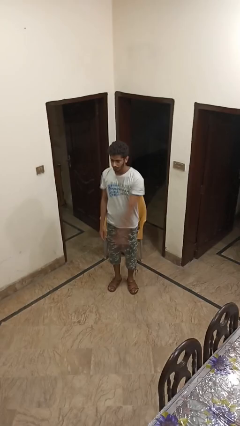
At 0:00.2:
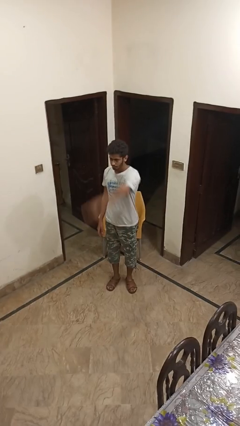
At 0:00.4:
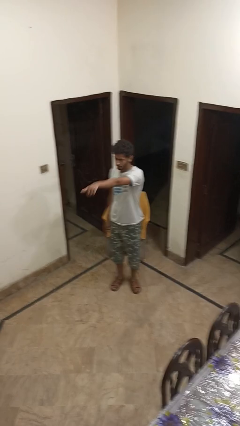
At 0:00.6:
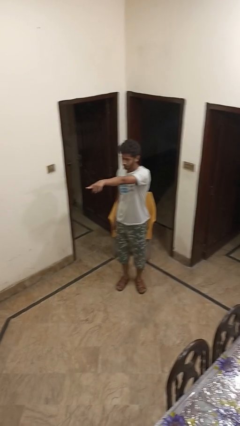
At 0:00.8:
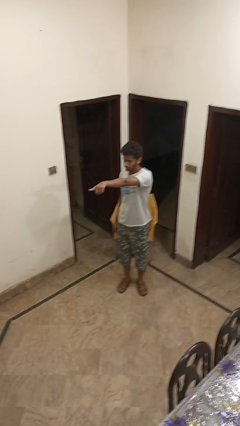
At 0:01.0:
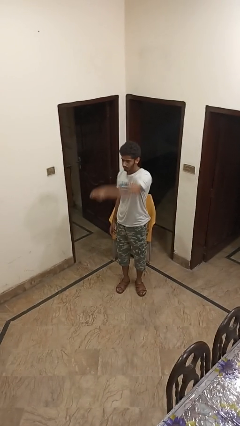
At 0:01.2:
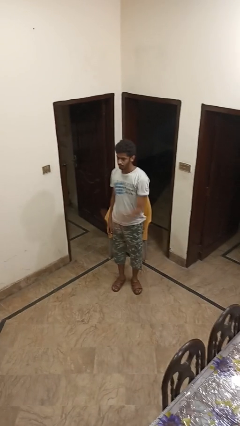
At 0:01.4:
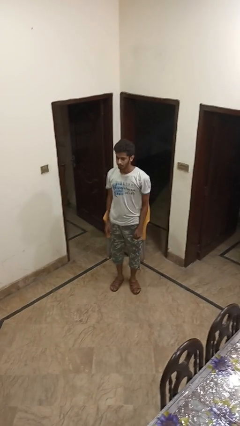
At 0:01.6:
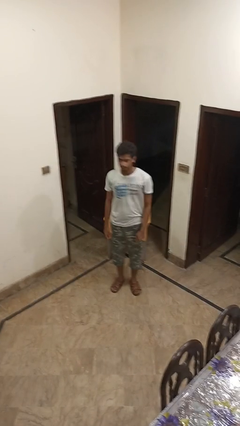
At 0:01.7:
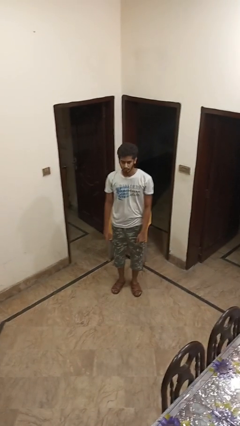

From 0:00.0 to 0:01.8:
person points at person

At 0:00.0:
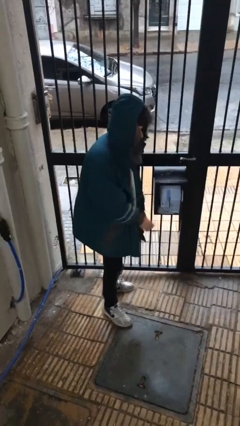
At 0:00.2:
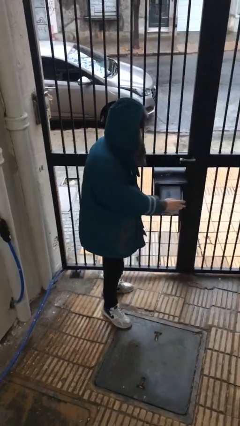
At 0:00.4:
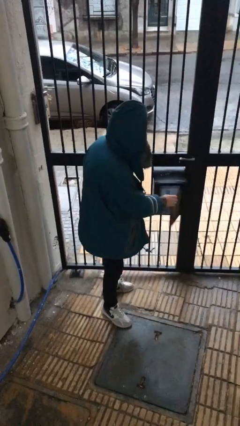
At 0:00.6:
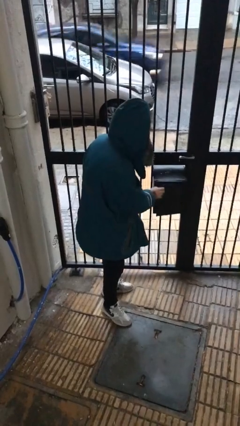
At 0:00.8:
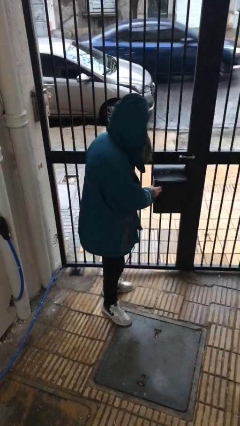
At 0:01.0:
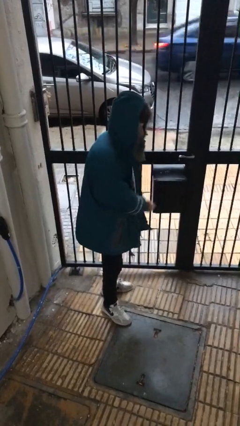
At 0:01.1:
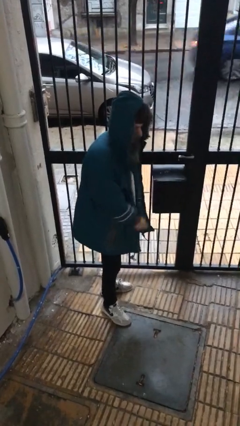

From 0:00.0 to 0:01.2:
person closes mailbox

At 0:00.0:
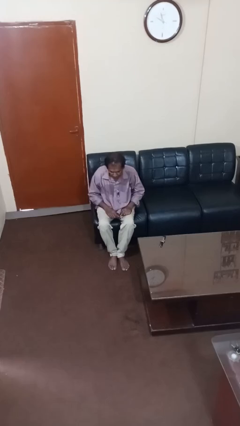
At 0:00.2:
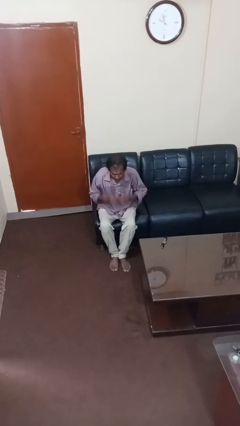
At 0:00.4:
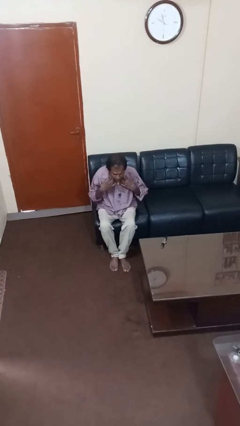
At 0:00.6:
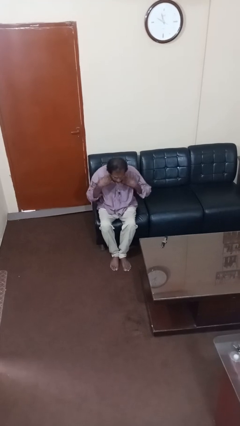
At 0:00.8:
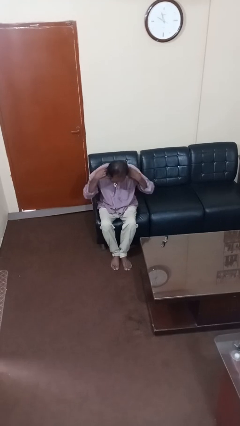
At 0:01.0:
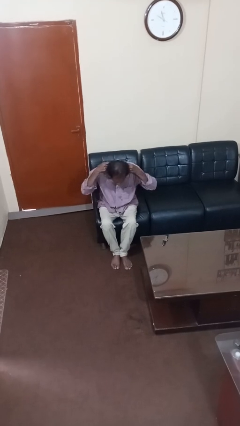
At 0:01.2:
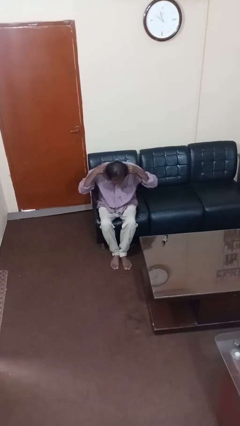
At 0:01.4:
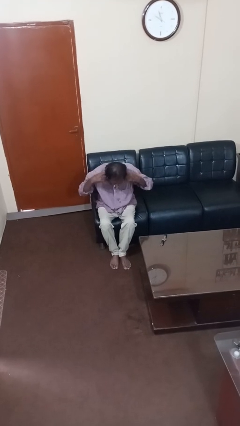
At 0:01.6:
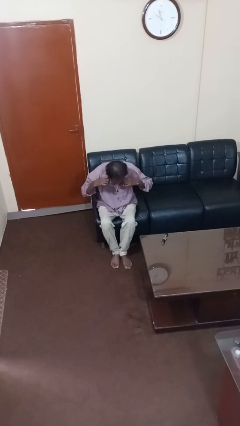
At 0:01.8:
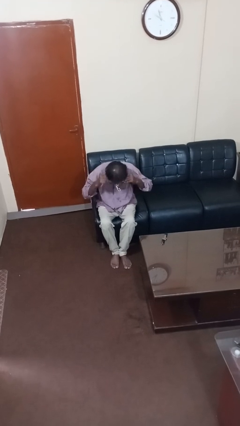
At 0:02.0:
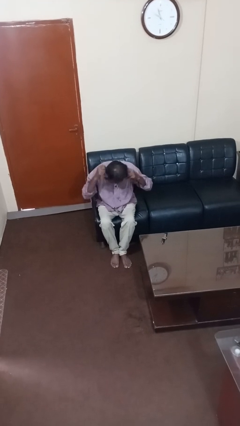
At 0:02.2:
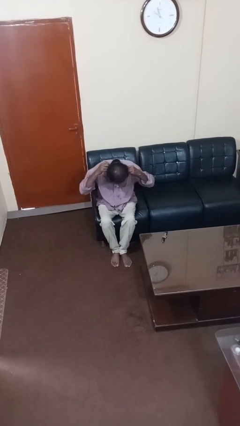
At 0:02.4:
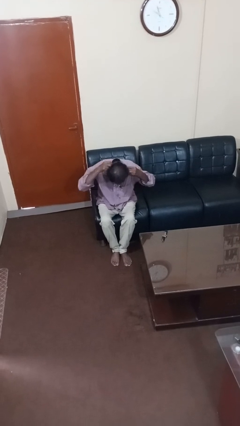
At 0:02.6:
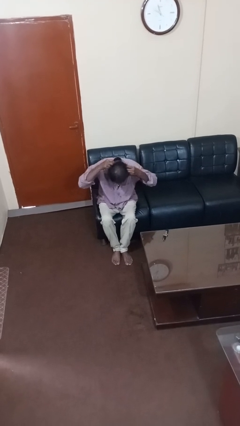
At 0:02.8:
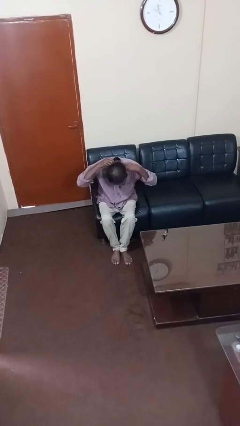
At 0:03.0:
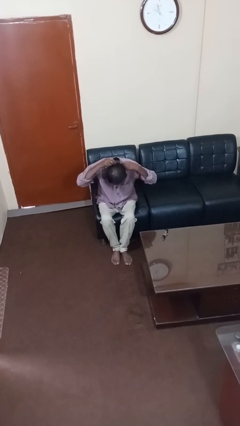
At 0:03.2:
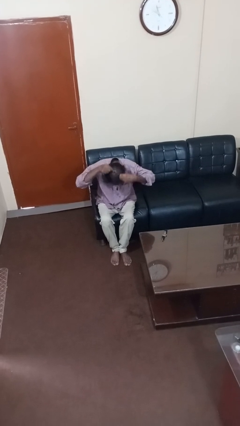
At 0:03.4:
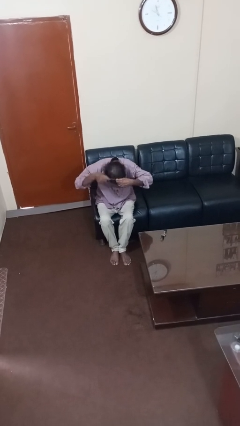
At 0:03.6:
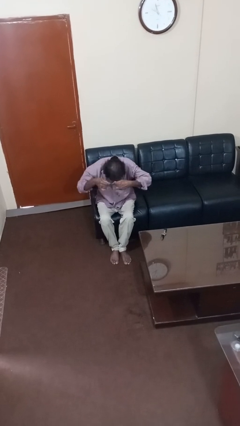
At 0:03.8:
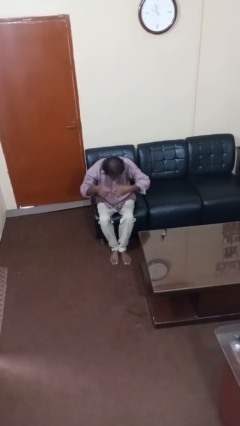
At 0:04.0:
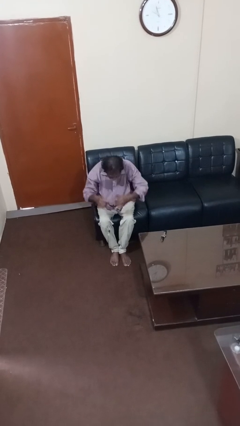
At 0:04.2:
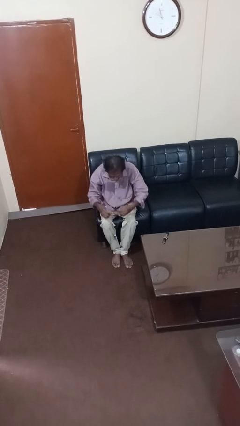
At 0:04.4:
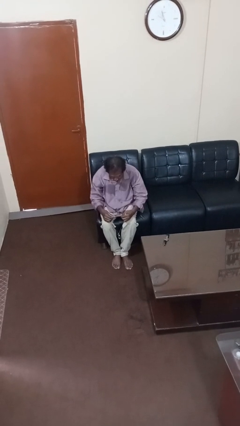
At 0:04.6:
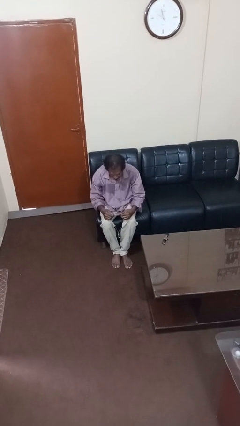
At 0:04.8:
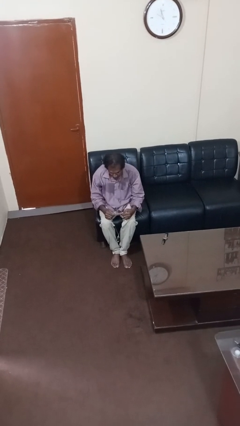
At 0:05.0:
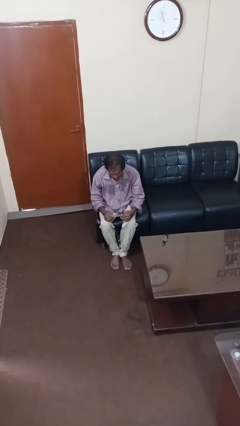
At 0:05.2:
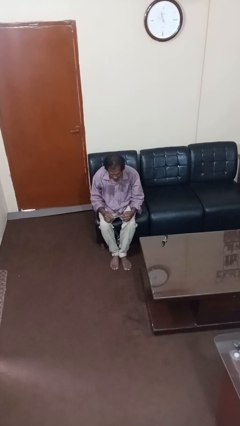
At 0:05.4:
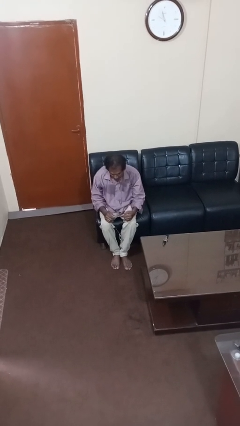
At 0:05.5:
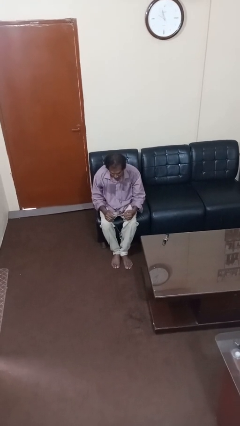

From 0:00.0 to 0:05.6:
person takes off necklace

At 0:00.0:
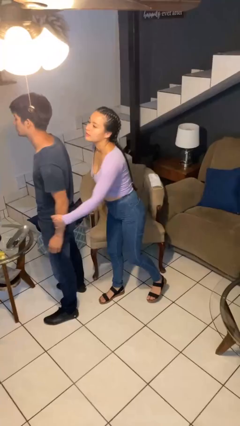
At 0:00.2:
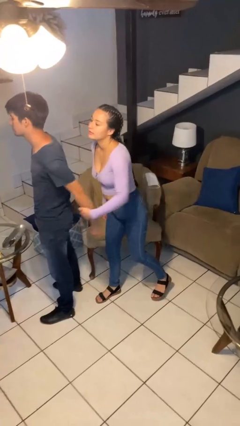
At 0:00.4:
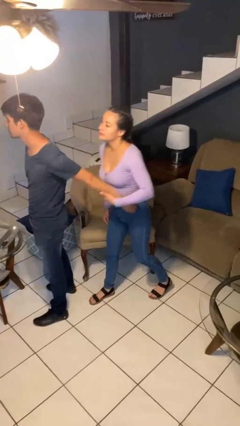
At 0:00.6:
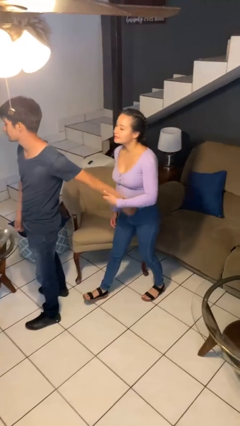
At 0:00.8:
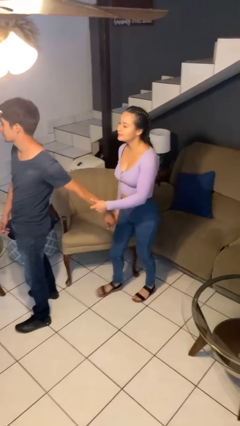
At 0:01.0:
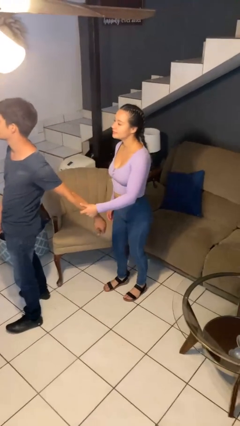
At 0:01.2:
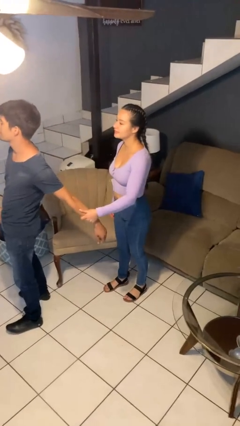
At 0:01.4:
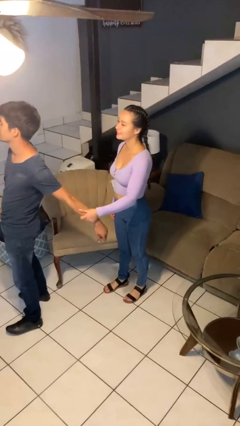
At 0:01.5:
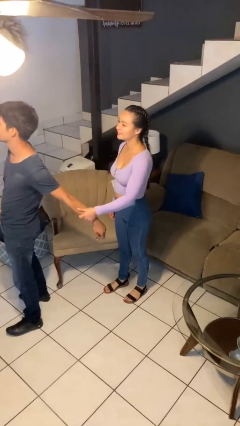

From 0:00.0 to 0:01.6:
person grabs person by forearm

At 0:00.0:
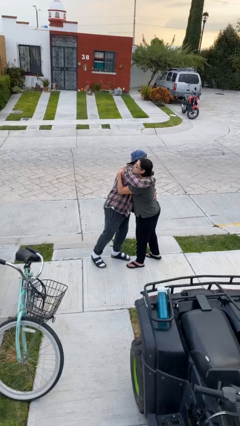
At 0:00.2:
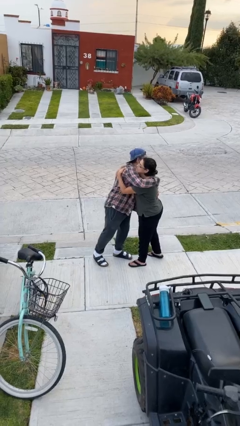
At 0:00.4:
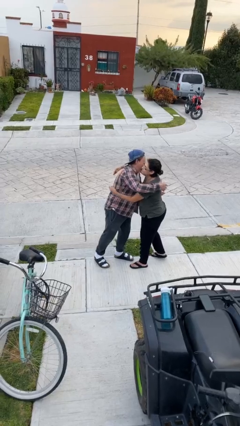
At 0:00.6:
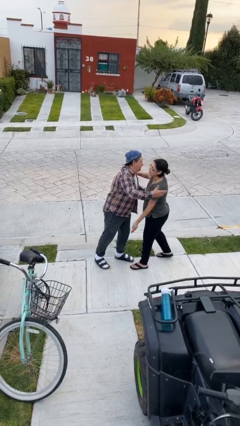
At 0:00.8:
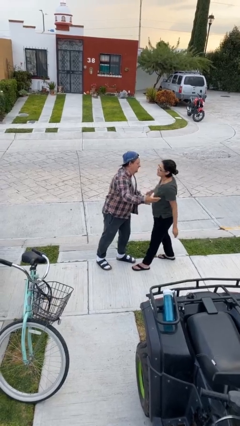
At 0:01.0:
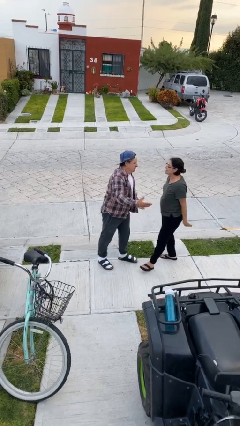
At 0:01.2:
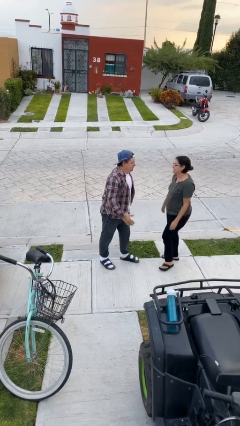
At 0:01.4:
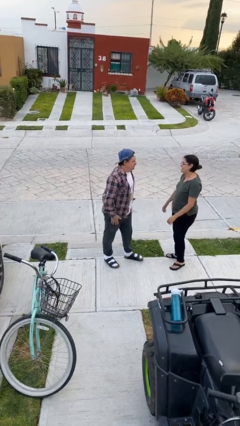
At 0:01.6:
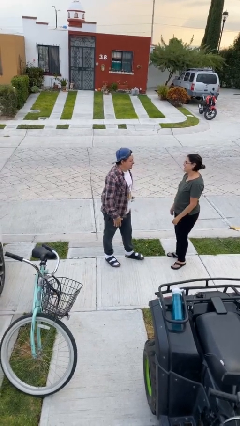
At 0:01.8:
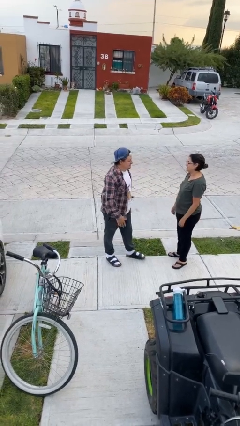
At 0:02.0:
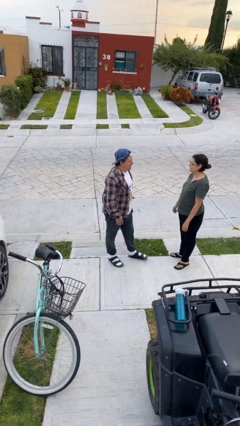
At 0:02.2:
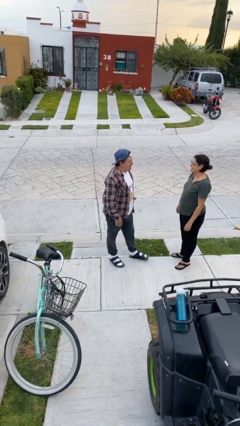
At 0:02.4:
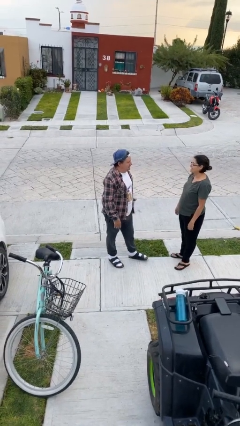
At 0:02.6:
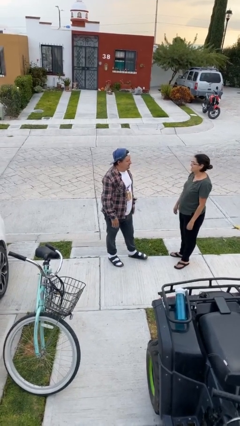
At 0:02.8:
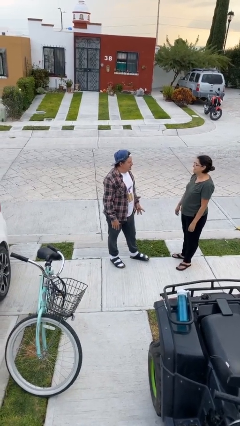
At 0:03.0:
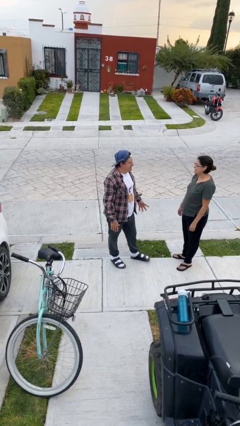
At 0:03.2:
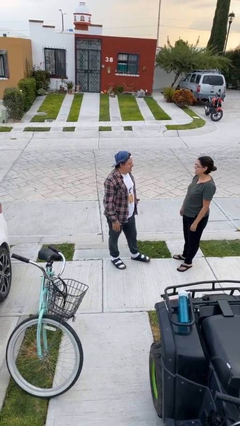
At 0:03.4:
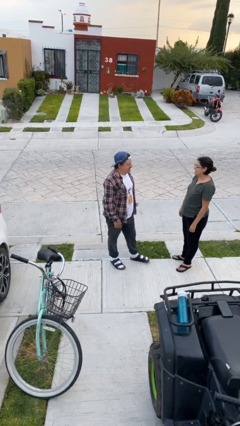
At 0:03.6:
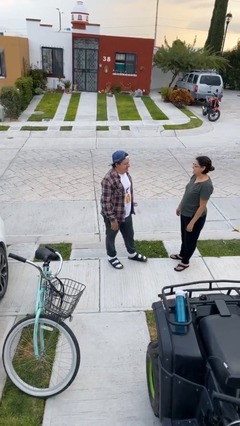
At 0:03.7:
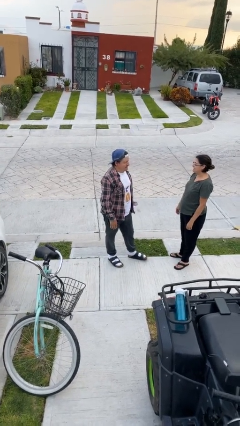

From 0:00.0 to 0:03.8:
person talks to person

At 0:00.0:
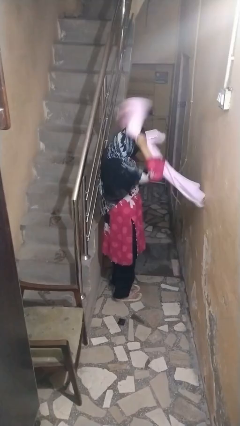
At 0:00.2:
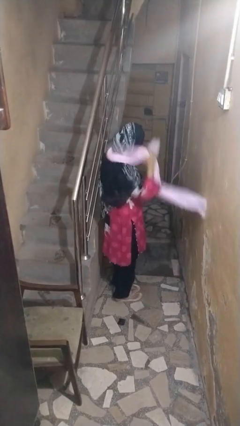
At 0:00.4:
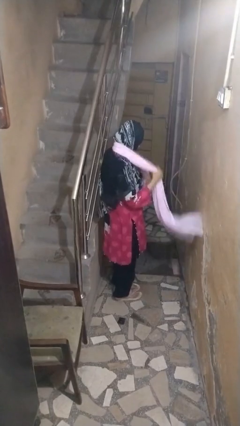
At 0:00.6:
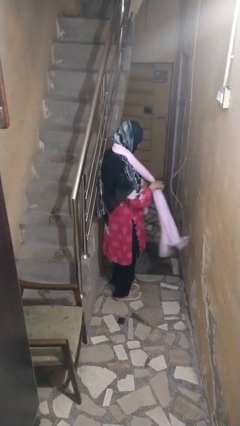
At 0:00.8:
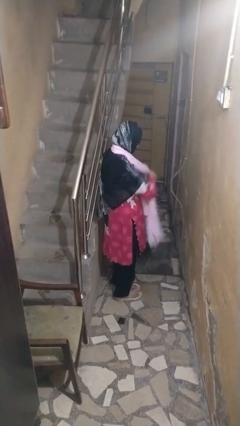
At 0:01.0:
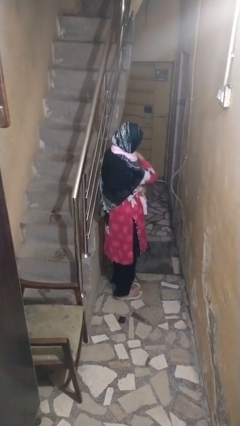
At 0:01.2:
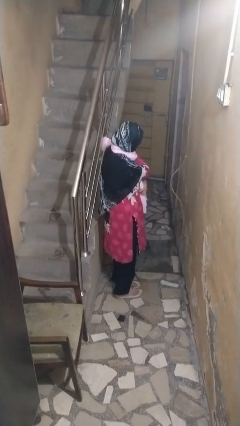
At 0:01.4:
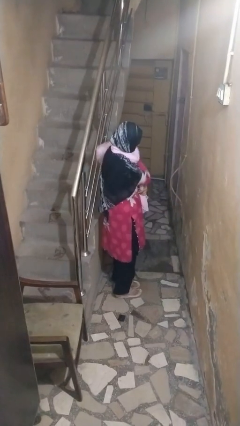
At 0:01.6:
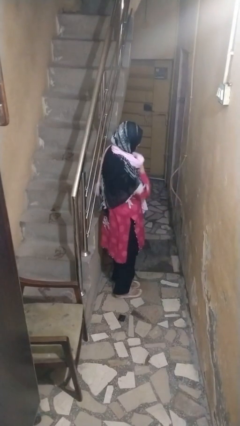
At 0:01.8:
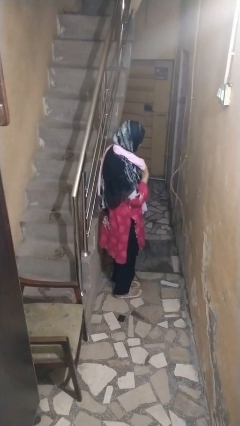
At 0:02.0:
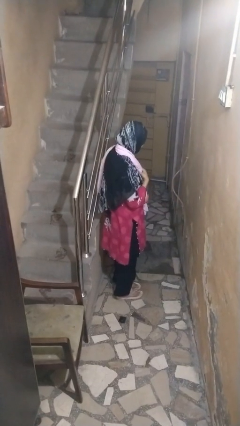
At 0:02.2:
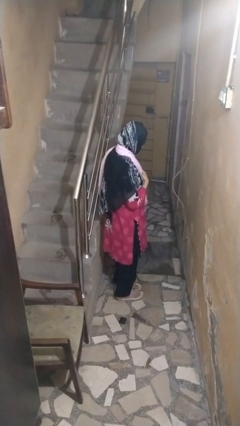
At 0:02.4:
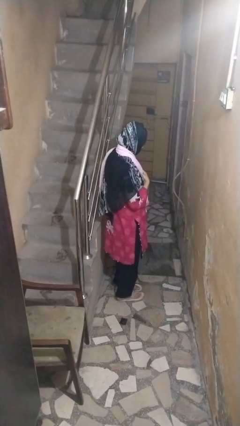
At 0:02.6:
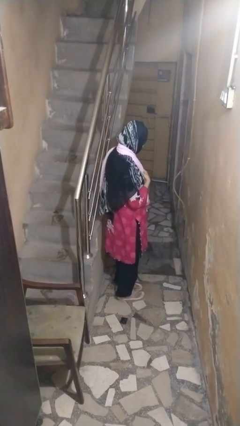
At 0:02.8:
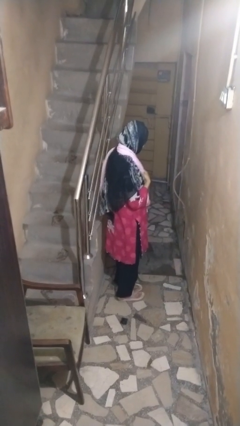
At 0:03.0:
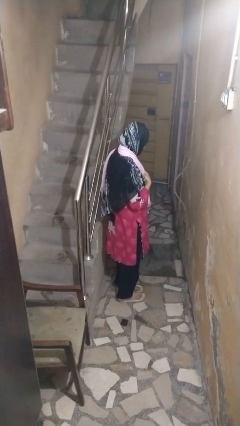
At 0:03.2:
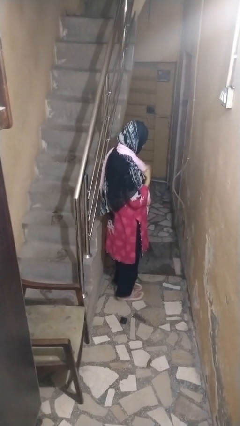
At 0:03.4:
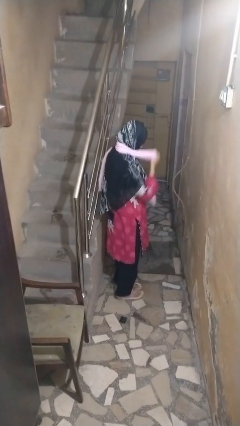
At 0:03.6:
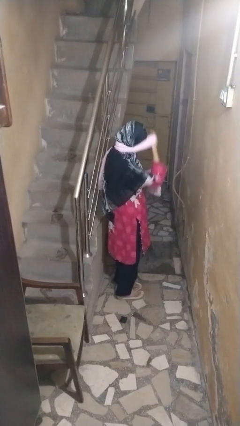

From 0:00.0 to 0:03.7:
person puts on scarf
